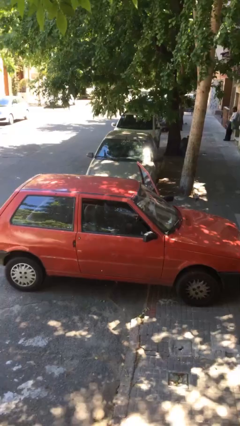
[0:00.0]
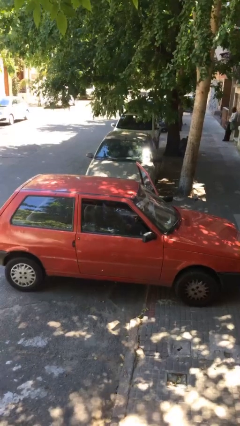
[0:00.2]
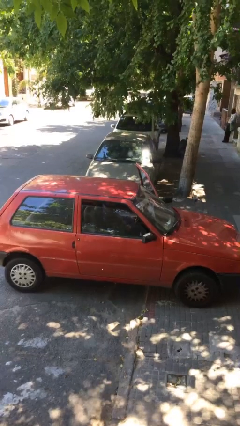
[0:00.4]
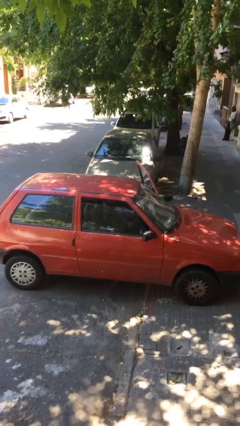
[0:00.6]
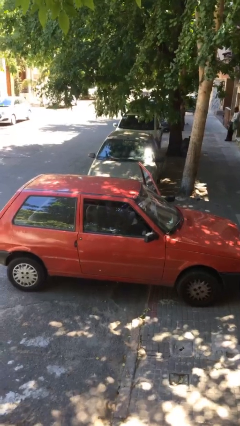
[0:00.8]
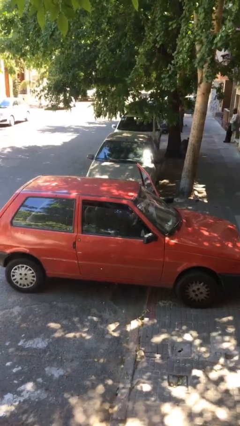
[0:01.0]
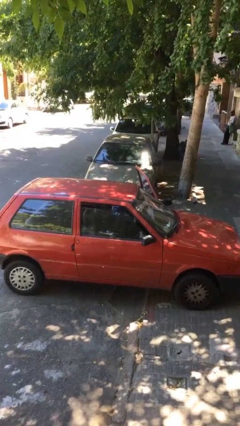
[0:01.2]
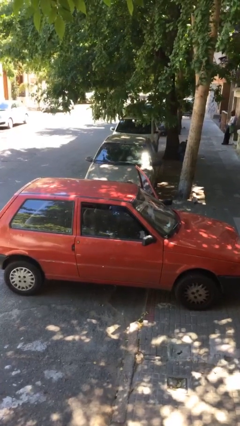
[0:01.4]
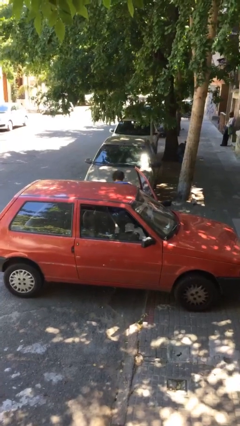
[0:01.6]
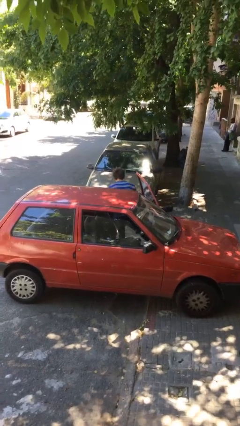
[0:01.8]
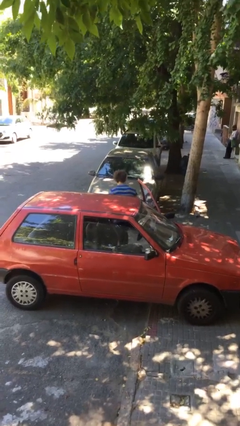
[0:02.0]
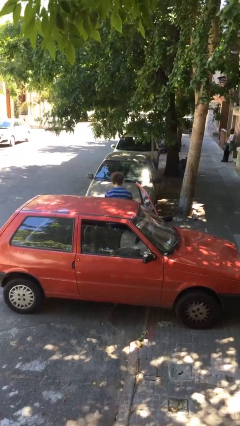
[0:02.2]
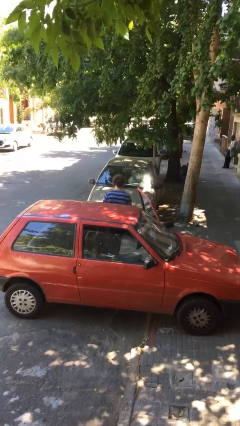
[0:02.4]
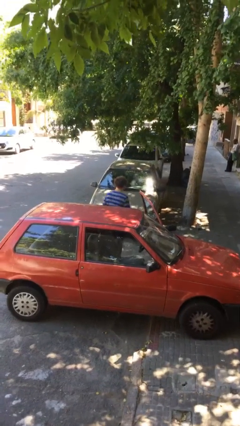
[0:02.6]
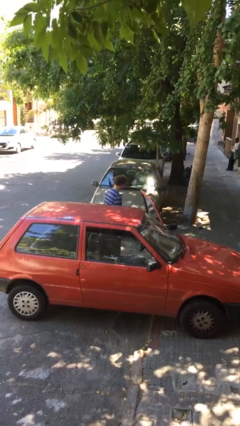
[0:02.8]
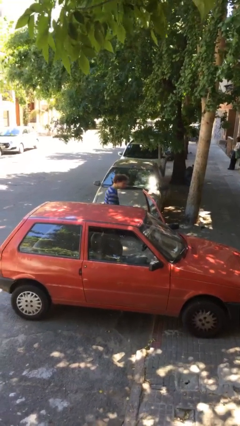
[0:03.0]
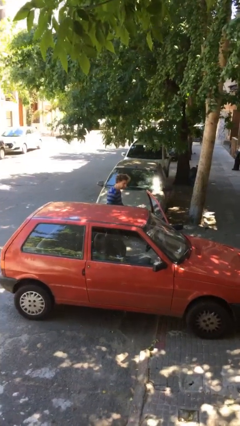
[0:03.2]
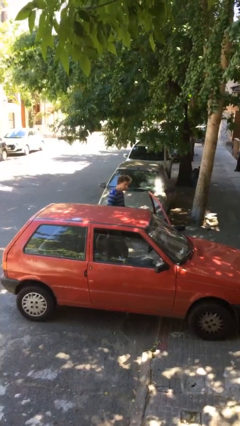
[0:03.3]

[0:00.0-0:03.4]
person exits car

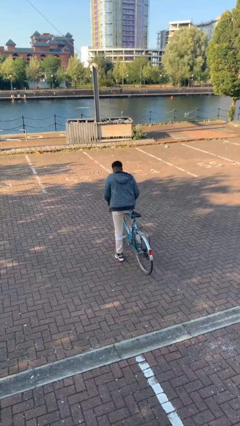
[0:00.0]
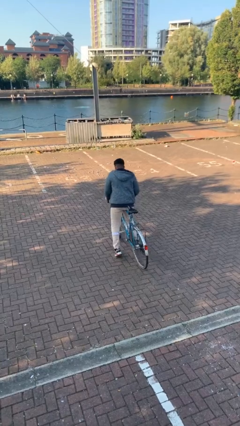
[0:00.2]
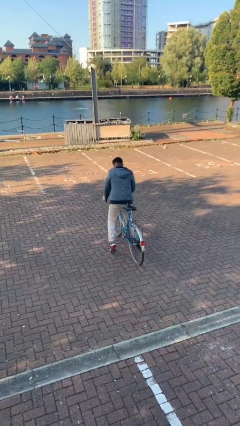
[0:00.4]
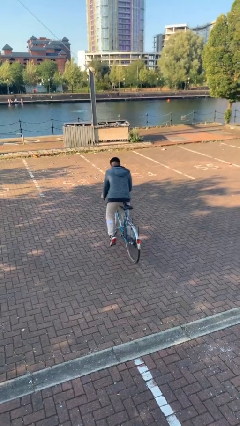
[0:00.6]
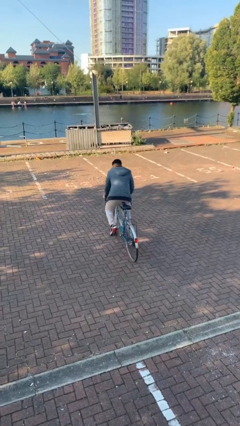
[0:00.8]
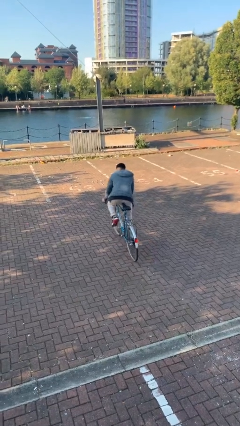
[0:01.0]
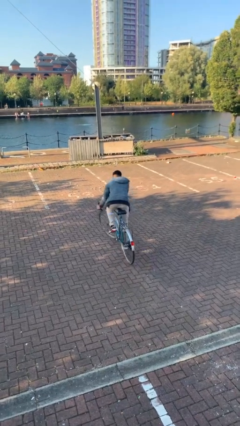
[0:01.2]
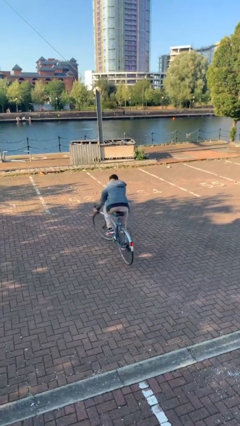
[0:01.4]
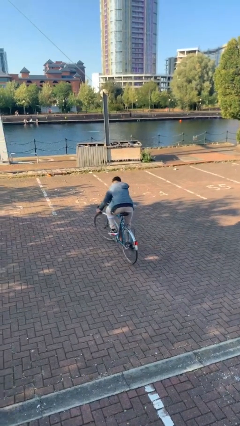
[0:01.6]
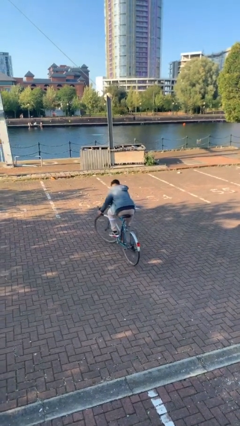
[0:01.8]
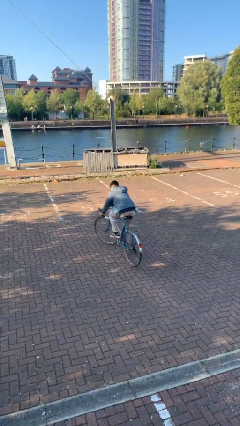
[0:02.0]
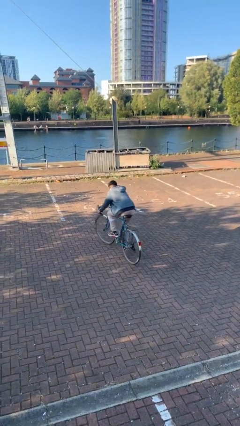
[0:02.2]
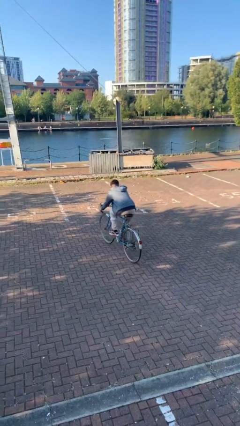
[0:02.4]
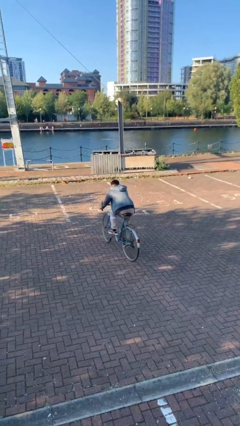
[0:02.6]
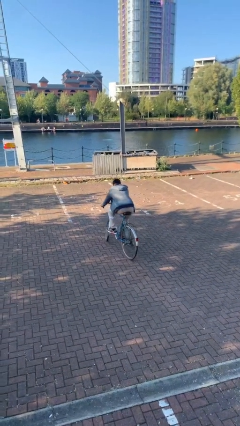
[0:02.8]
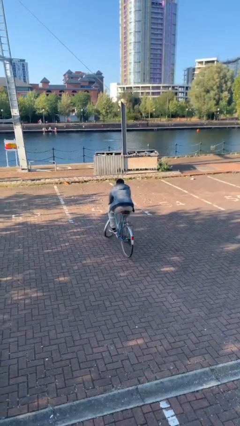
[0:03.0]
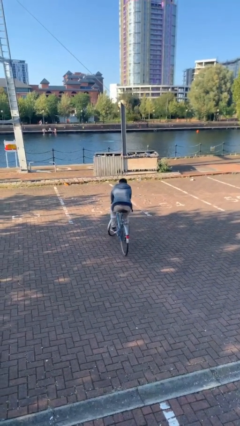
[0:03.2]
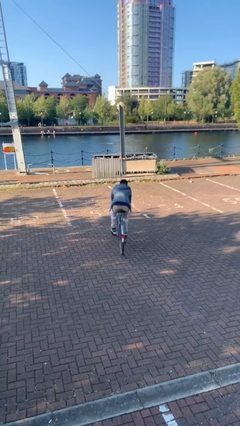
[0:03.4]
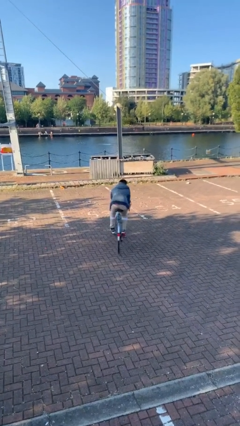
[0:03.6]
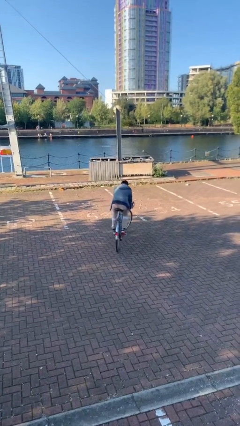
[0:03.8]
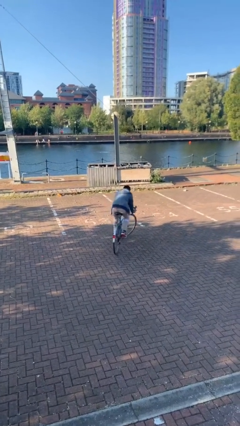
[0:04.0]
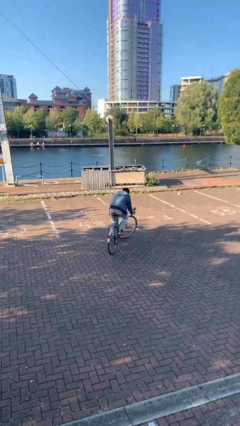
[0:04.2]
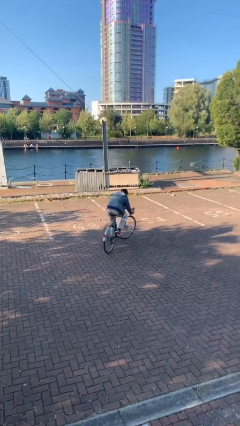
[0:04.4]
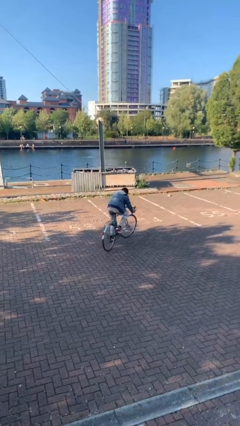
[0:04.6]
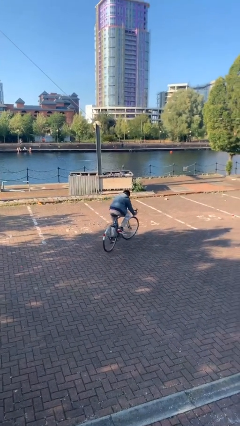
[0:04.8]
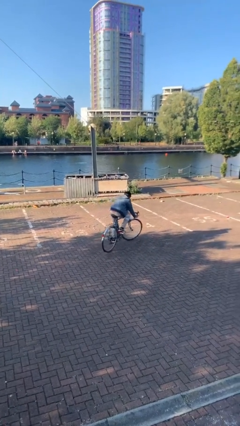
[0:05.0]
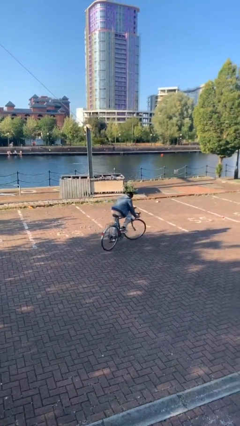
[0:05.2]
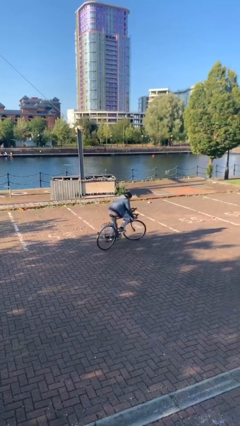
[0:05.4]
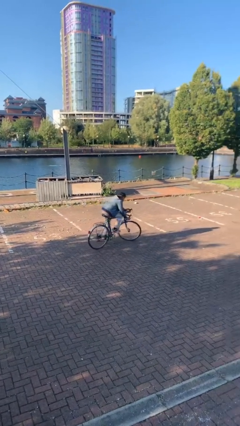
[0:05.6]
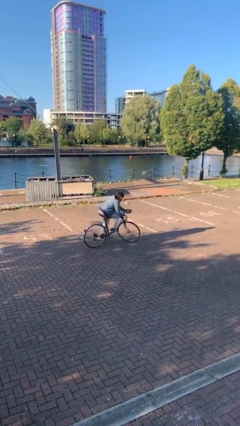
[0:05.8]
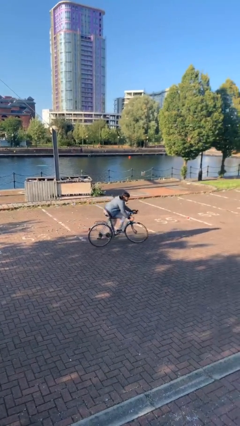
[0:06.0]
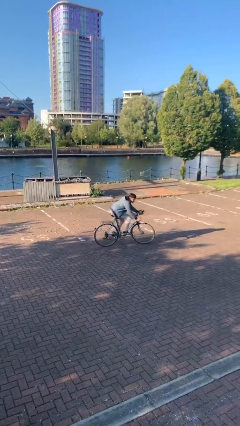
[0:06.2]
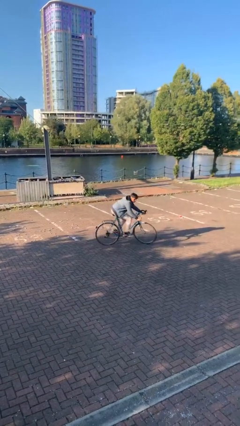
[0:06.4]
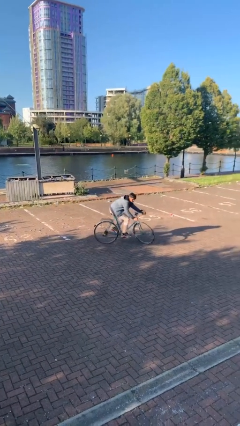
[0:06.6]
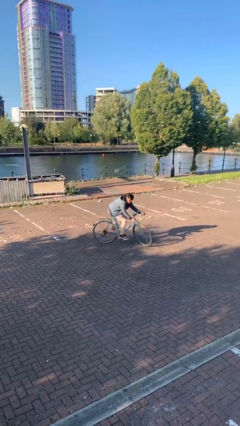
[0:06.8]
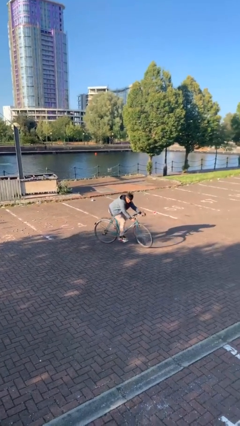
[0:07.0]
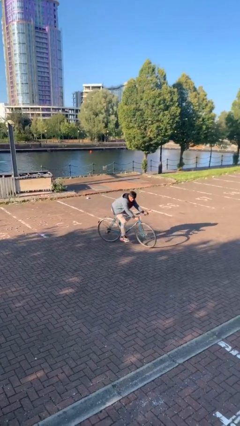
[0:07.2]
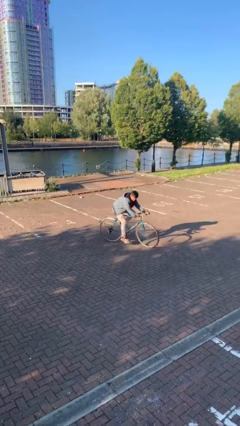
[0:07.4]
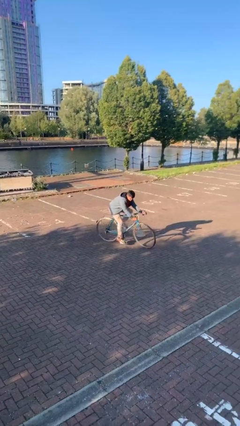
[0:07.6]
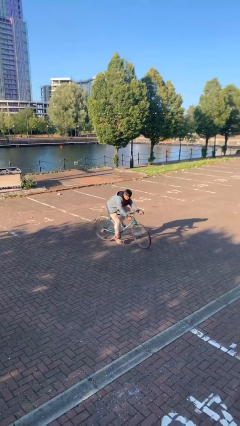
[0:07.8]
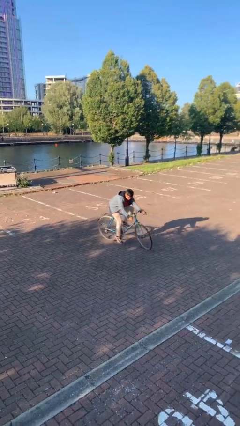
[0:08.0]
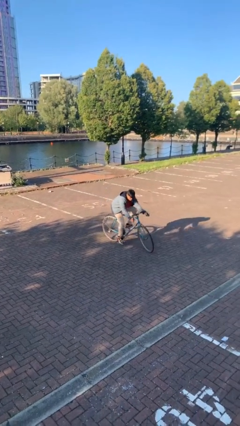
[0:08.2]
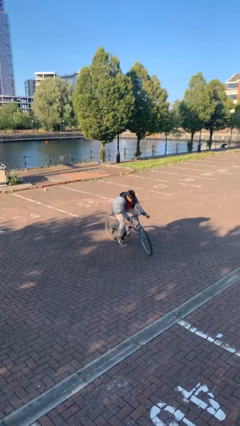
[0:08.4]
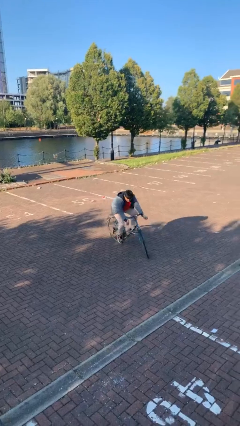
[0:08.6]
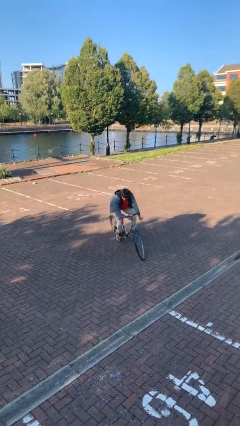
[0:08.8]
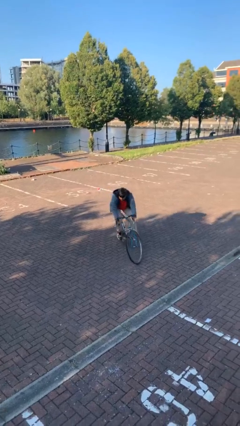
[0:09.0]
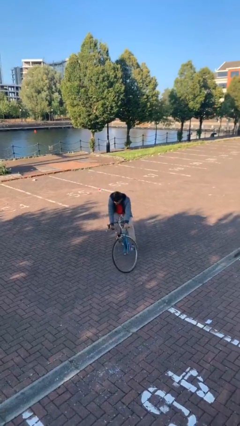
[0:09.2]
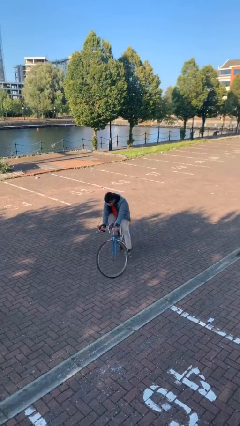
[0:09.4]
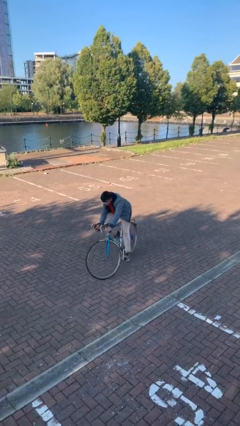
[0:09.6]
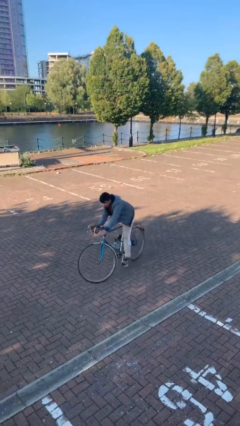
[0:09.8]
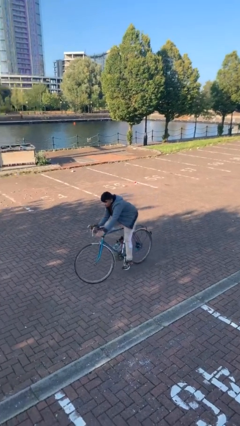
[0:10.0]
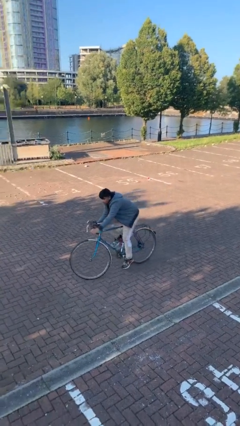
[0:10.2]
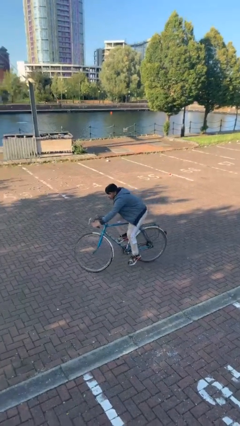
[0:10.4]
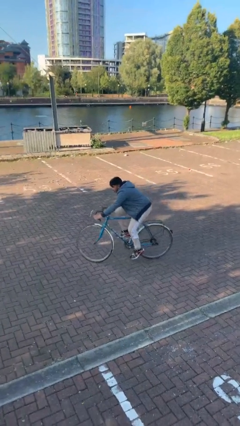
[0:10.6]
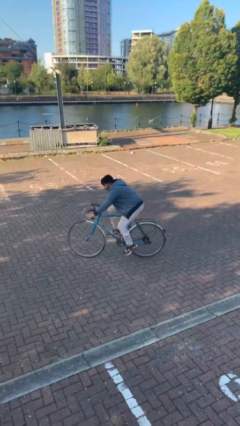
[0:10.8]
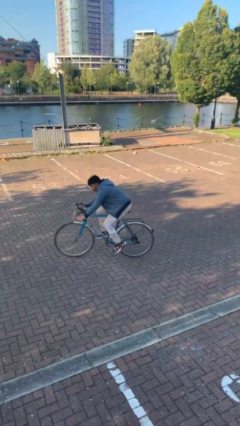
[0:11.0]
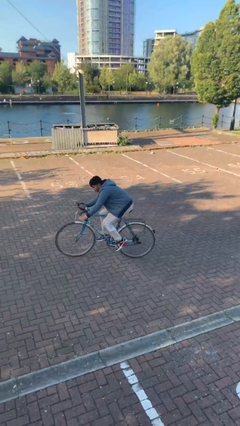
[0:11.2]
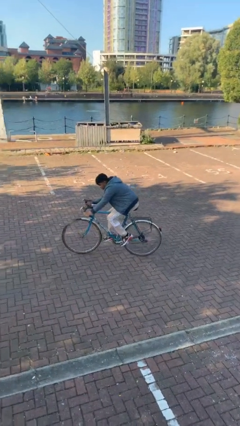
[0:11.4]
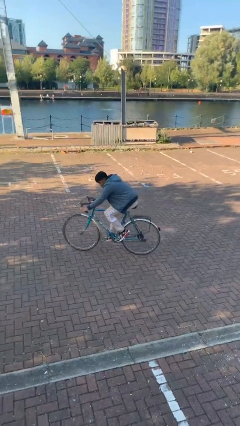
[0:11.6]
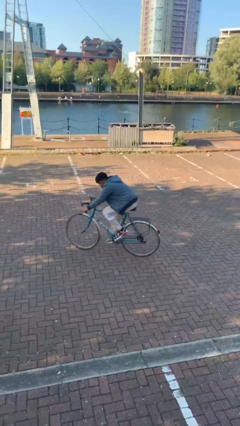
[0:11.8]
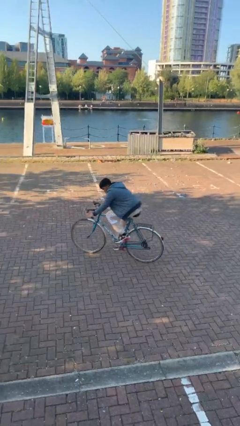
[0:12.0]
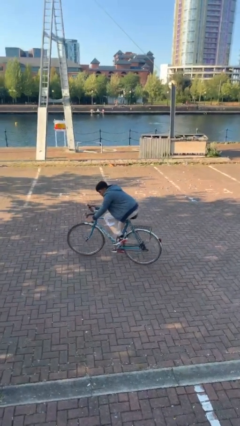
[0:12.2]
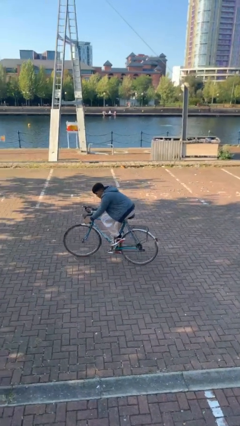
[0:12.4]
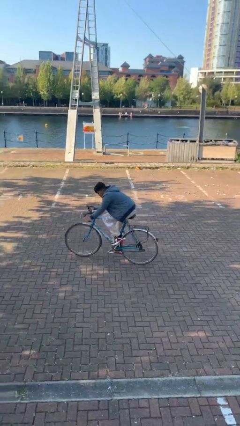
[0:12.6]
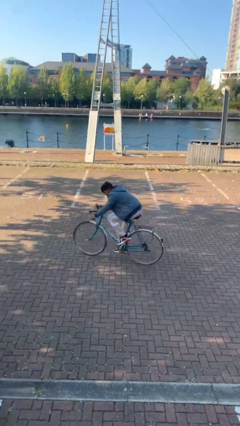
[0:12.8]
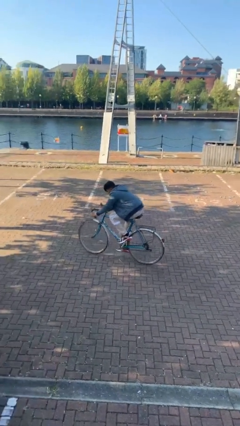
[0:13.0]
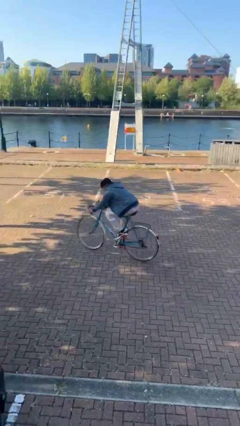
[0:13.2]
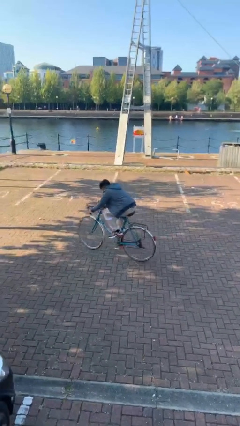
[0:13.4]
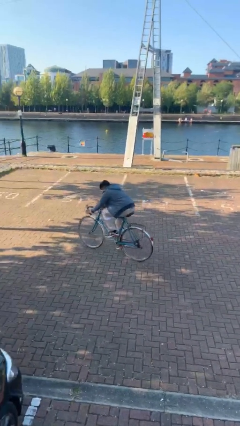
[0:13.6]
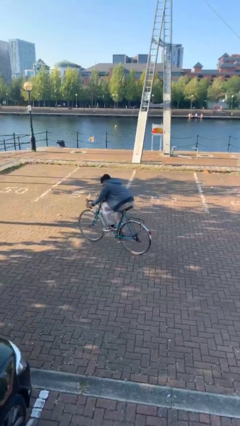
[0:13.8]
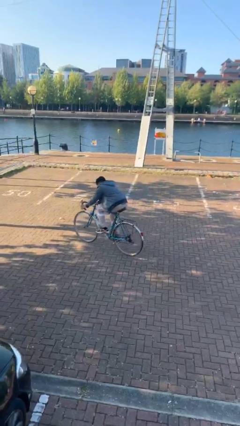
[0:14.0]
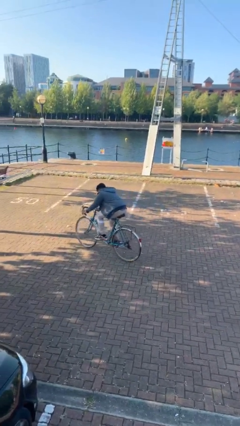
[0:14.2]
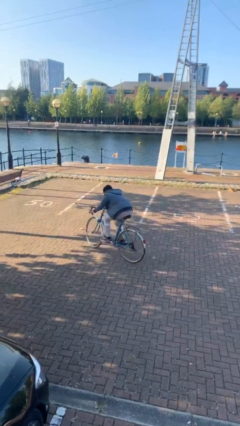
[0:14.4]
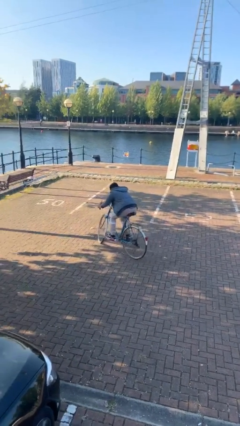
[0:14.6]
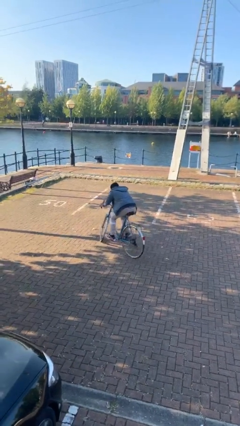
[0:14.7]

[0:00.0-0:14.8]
person rides bicycle
